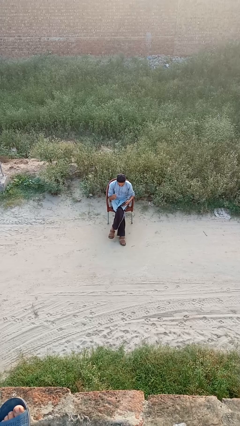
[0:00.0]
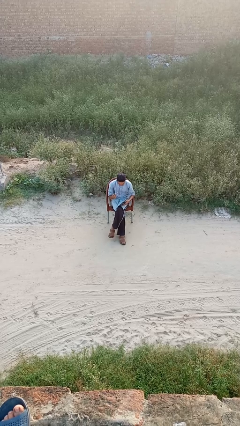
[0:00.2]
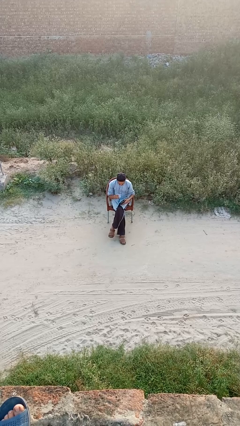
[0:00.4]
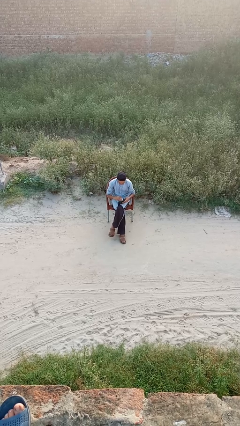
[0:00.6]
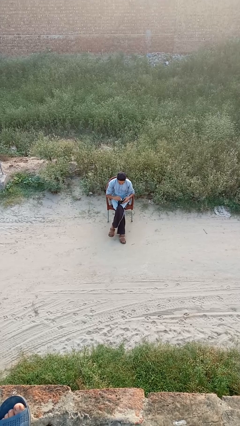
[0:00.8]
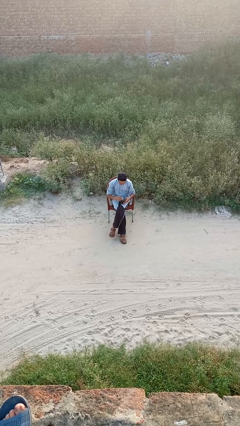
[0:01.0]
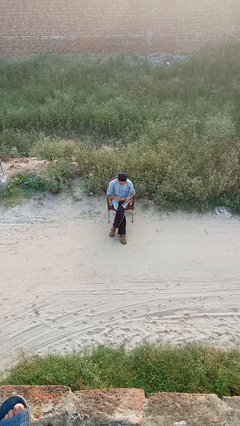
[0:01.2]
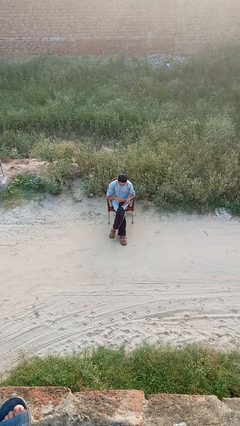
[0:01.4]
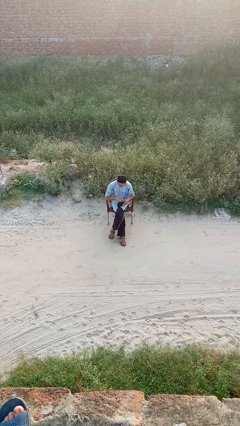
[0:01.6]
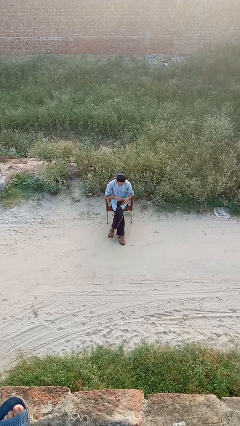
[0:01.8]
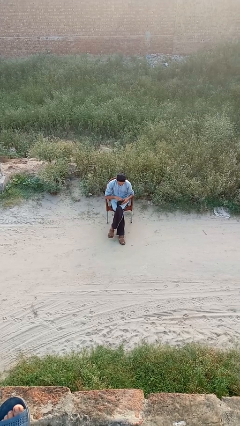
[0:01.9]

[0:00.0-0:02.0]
person puts object into purse

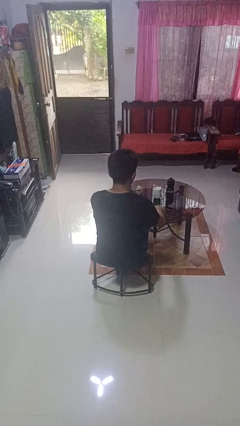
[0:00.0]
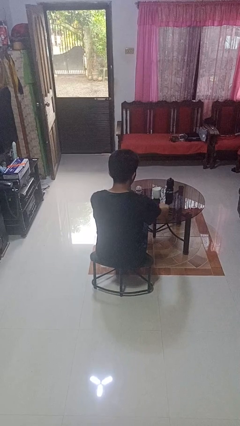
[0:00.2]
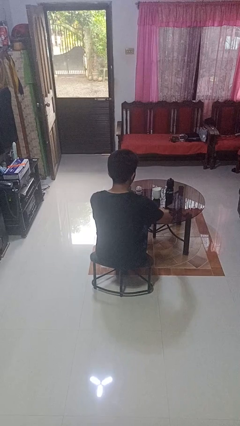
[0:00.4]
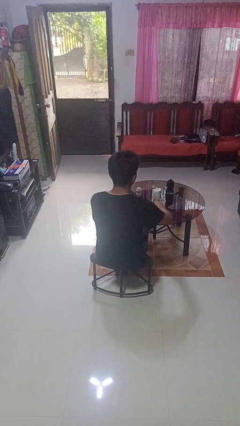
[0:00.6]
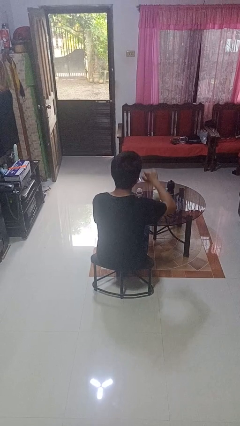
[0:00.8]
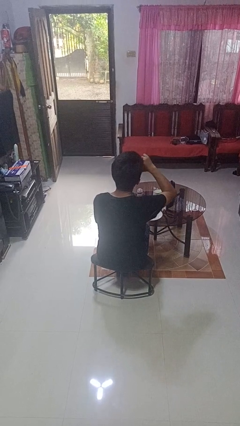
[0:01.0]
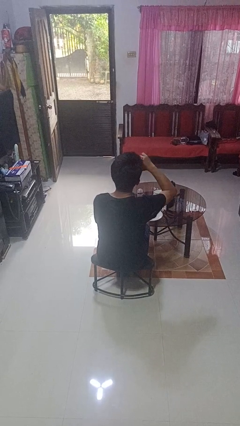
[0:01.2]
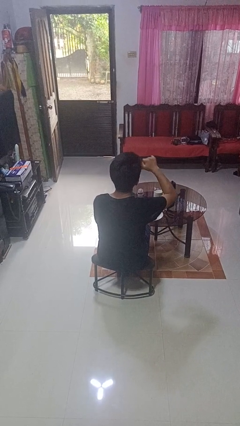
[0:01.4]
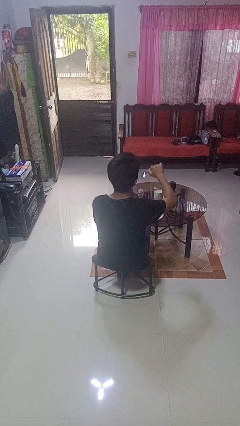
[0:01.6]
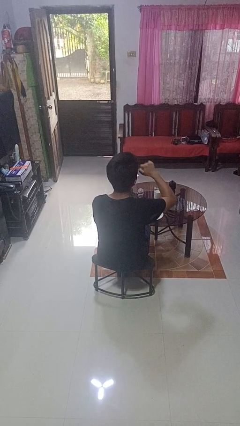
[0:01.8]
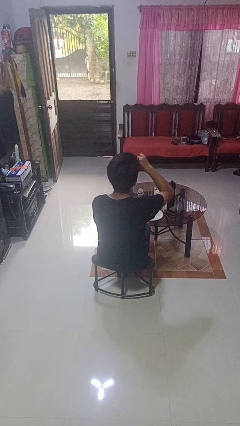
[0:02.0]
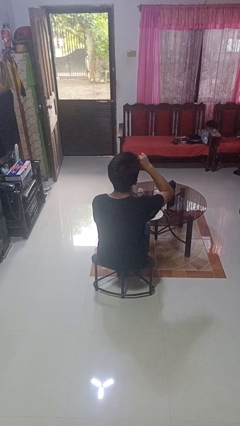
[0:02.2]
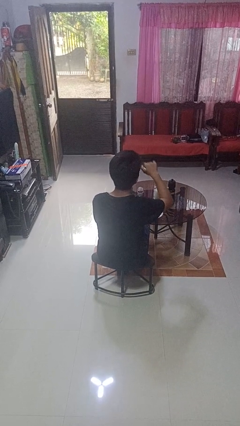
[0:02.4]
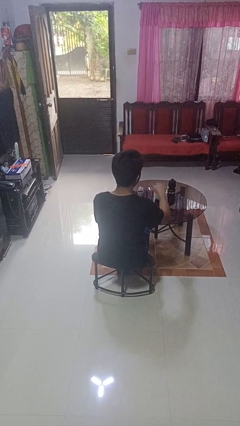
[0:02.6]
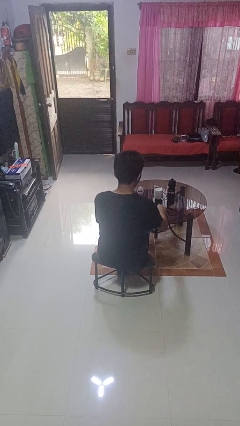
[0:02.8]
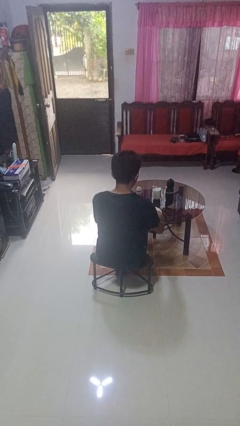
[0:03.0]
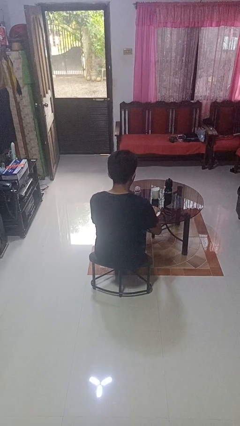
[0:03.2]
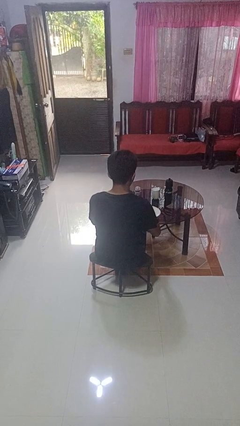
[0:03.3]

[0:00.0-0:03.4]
person eats with utensil

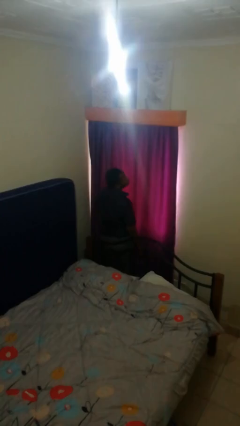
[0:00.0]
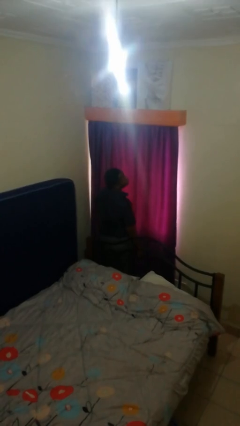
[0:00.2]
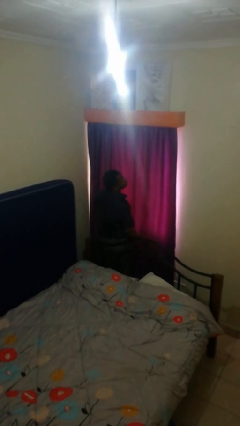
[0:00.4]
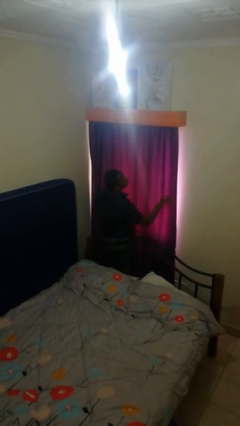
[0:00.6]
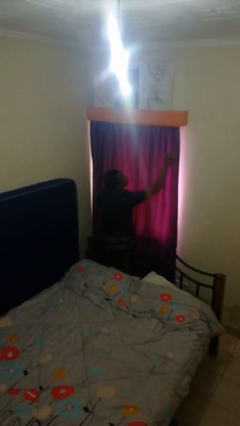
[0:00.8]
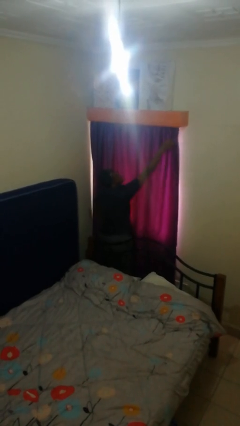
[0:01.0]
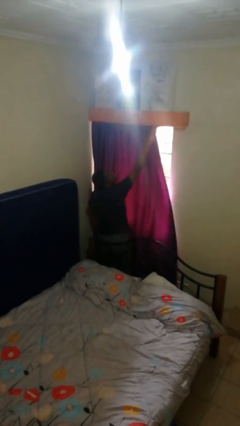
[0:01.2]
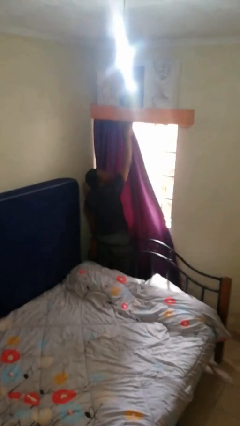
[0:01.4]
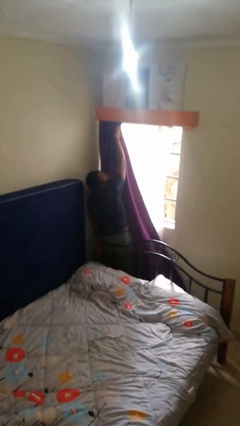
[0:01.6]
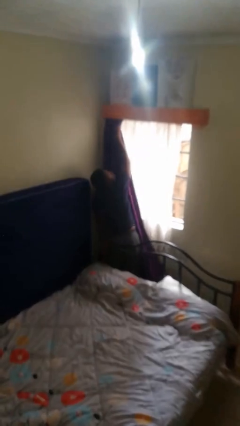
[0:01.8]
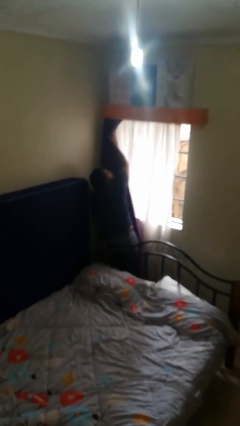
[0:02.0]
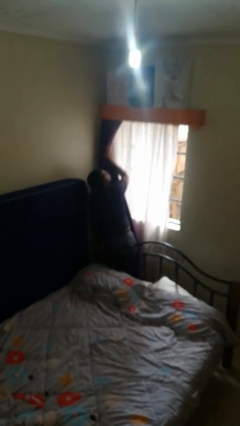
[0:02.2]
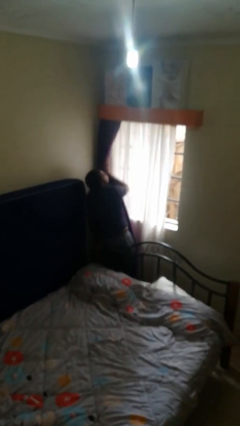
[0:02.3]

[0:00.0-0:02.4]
person opens curtains

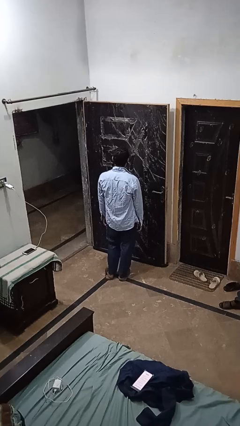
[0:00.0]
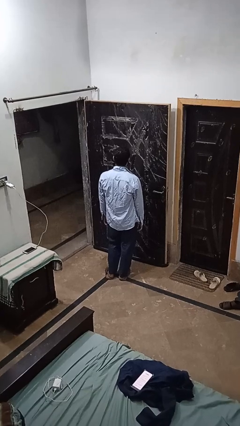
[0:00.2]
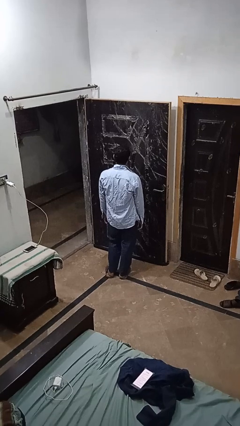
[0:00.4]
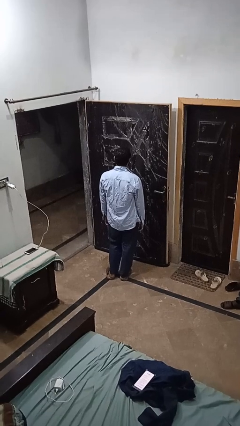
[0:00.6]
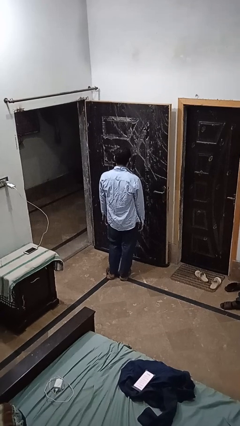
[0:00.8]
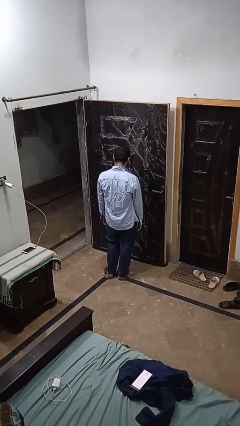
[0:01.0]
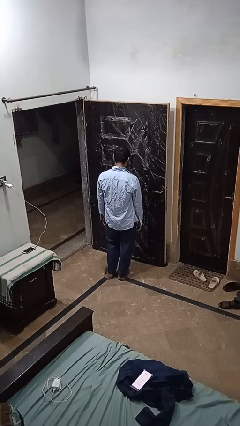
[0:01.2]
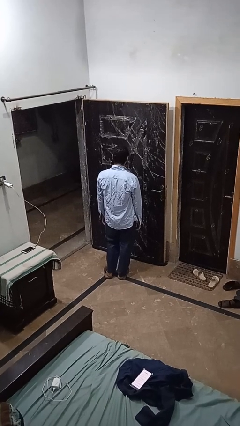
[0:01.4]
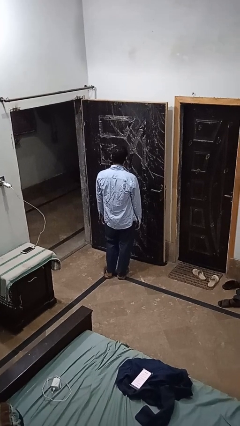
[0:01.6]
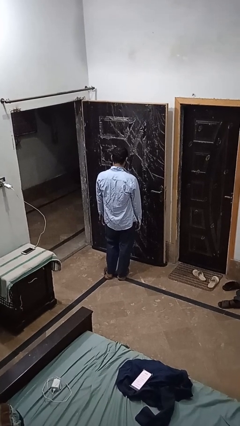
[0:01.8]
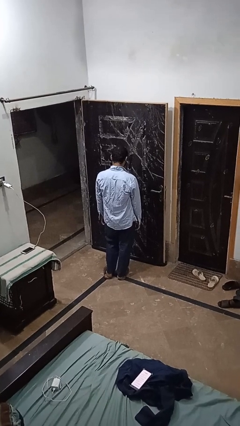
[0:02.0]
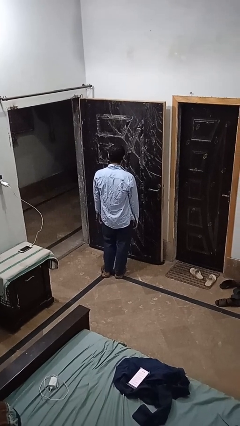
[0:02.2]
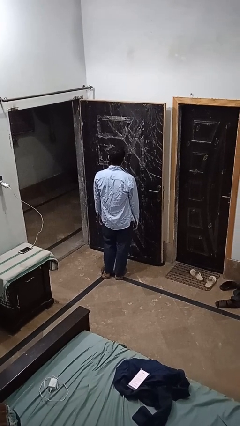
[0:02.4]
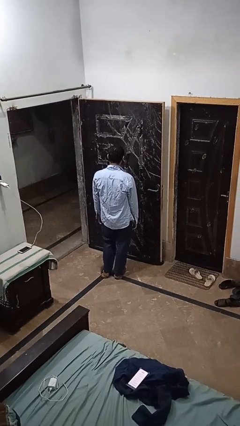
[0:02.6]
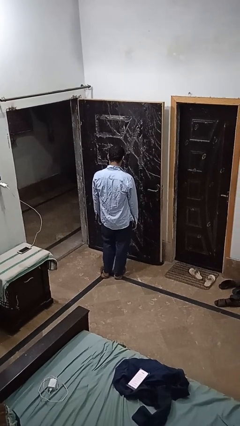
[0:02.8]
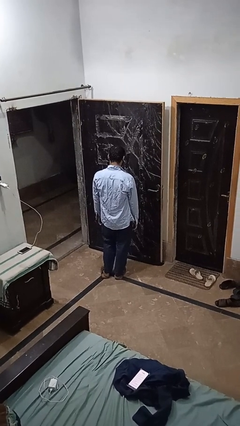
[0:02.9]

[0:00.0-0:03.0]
person nods head

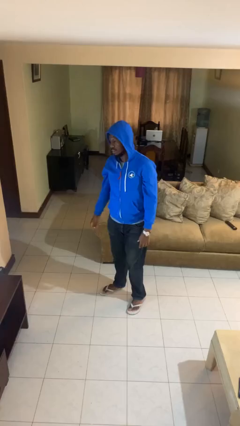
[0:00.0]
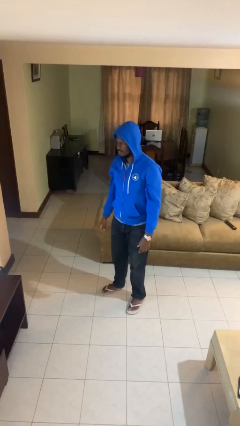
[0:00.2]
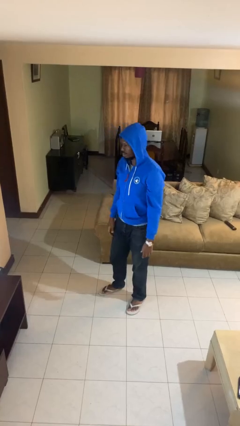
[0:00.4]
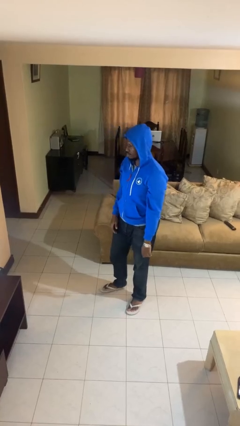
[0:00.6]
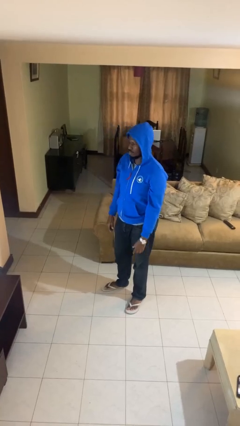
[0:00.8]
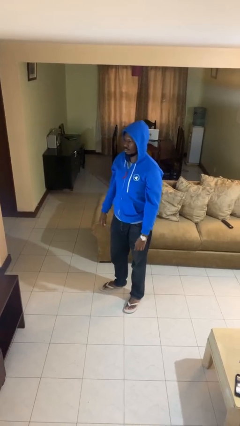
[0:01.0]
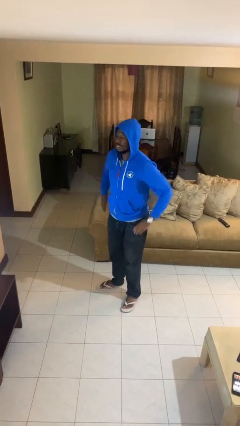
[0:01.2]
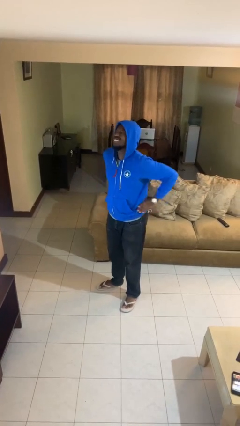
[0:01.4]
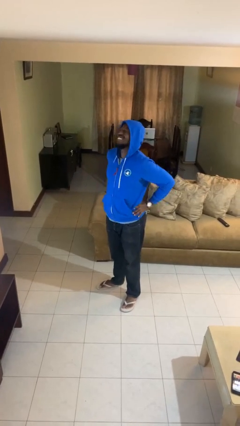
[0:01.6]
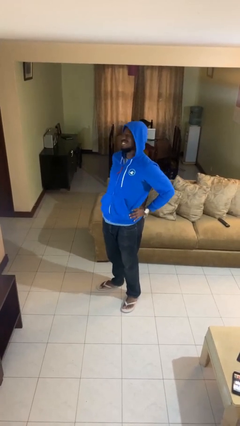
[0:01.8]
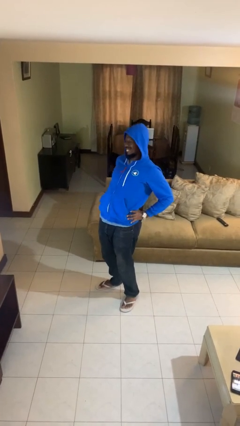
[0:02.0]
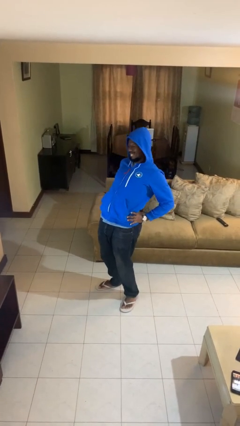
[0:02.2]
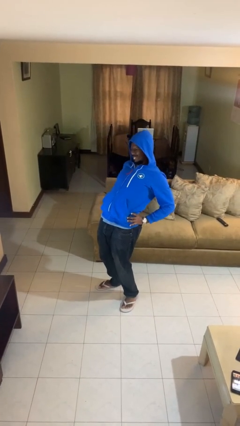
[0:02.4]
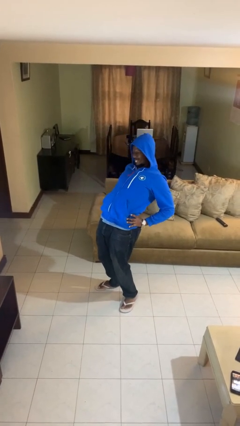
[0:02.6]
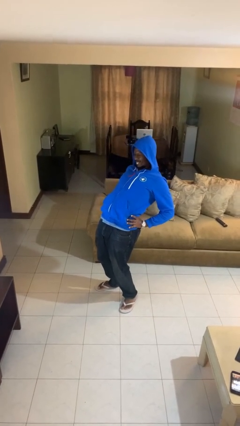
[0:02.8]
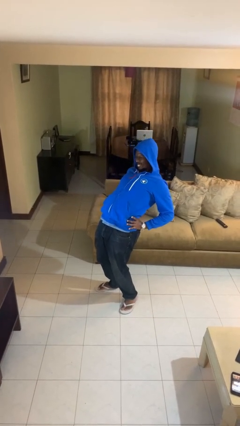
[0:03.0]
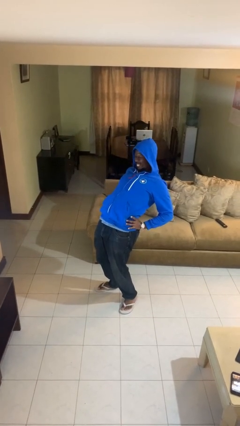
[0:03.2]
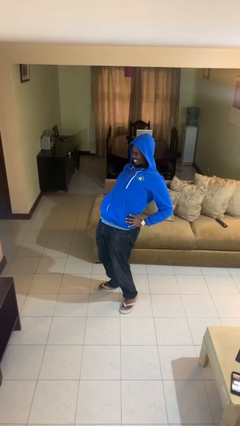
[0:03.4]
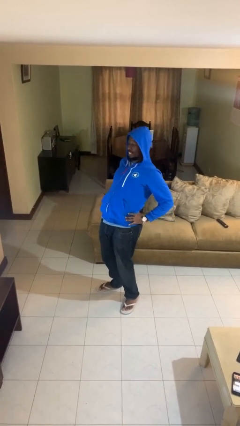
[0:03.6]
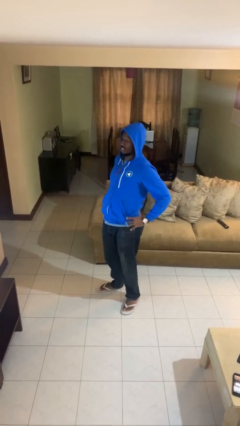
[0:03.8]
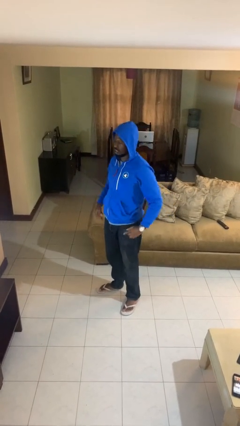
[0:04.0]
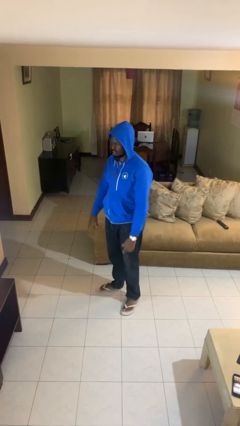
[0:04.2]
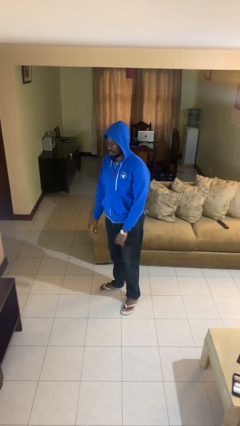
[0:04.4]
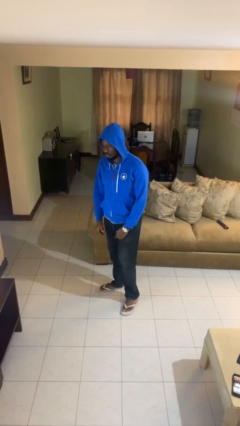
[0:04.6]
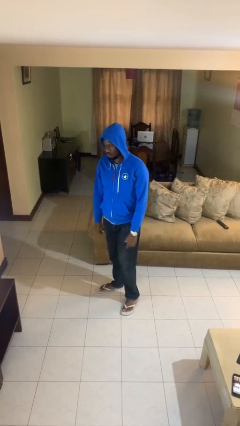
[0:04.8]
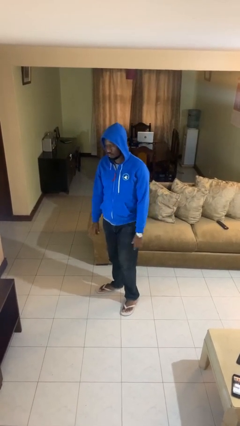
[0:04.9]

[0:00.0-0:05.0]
person stretches back

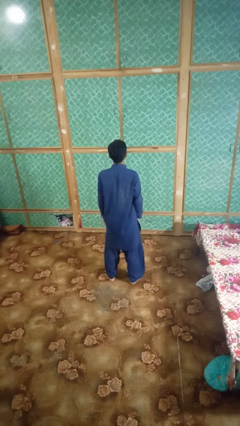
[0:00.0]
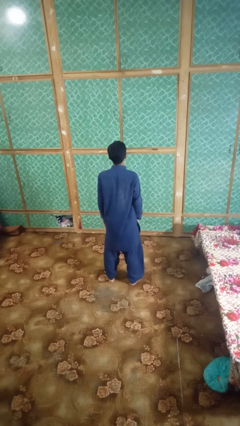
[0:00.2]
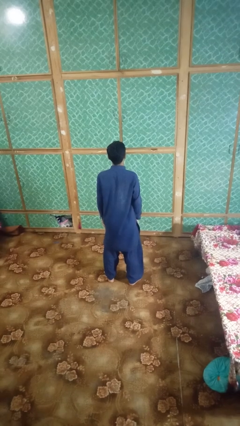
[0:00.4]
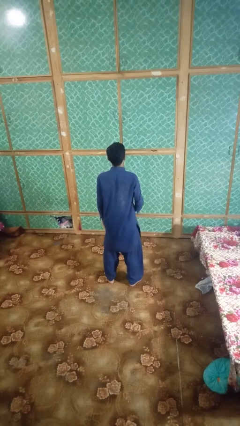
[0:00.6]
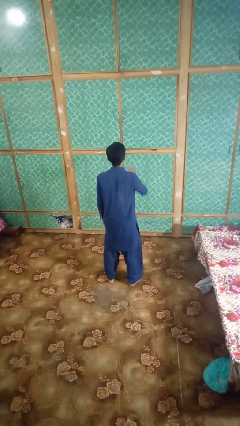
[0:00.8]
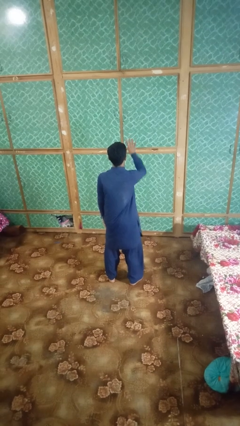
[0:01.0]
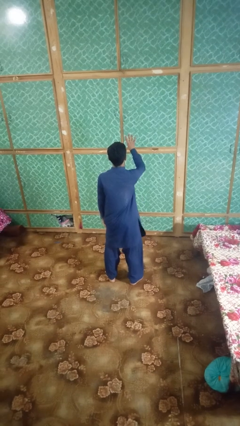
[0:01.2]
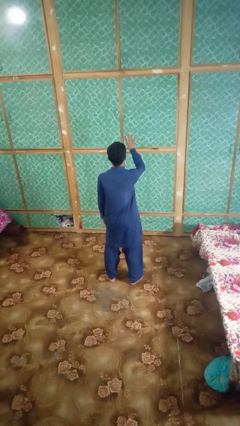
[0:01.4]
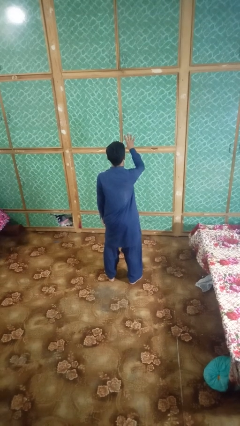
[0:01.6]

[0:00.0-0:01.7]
person gestures number four
